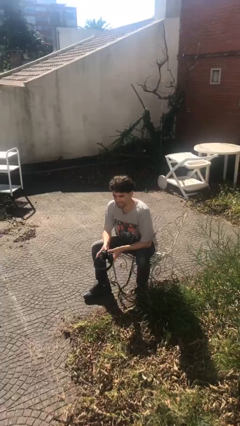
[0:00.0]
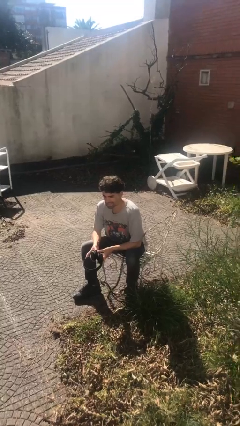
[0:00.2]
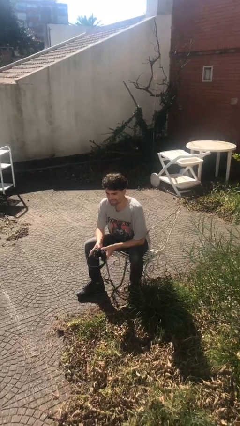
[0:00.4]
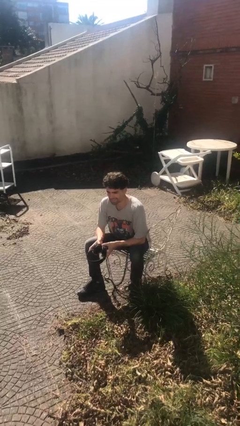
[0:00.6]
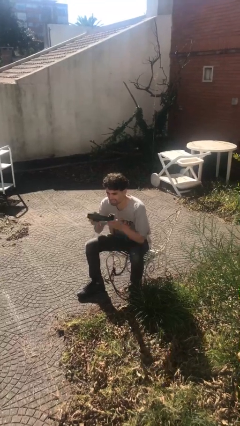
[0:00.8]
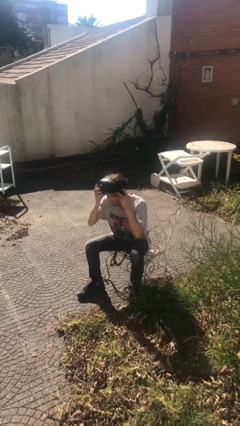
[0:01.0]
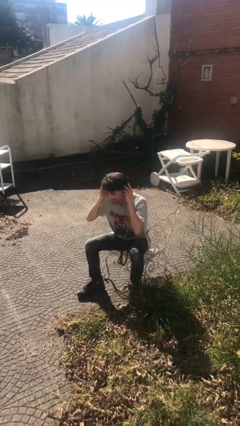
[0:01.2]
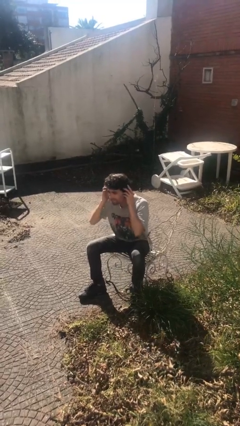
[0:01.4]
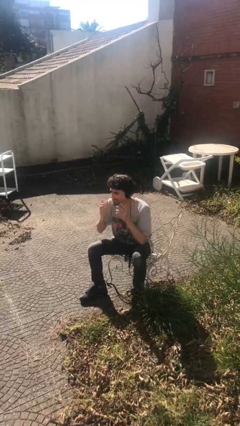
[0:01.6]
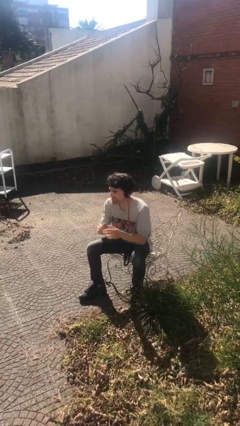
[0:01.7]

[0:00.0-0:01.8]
person puts on headphones

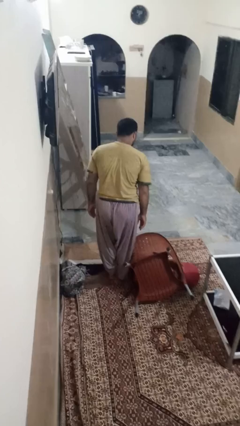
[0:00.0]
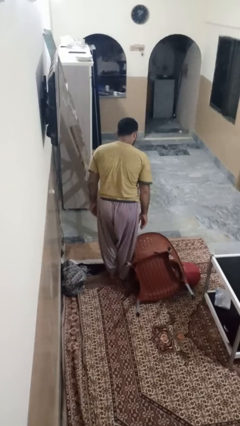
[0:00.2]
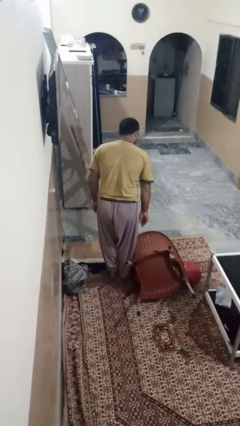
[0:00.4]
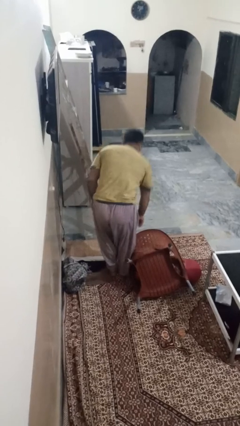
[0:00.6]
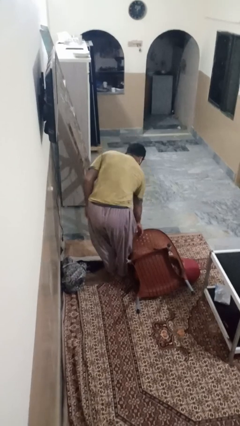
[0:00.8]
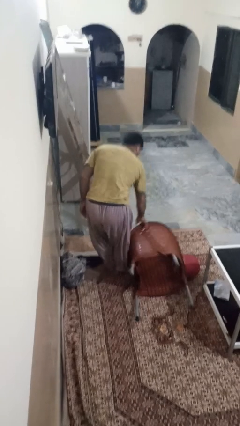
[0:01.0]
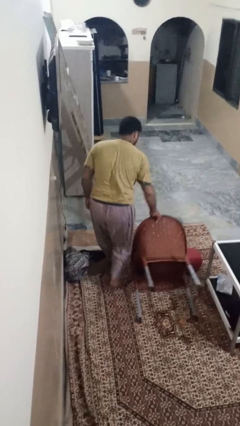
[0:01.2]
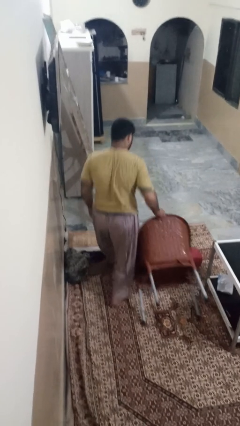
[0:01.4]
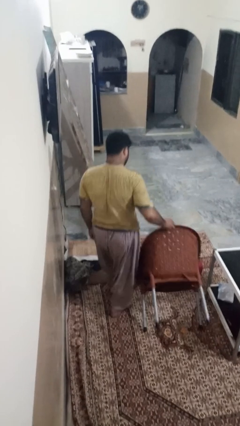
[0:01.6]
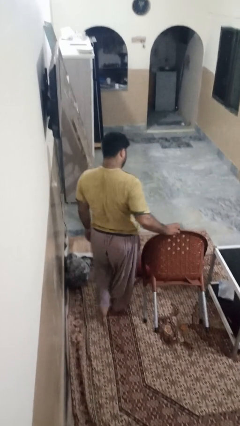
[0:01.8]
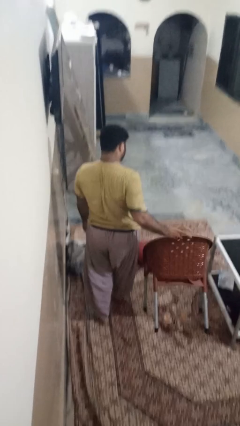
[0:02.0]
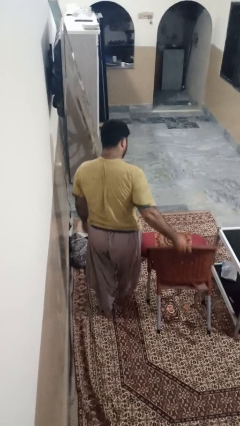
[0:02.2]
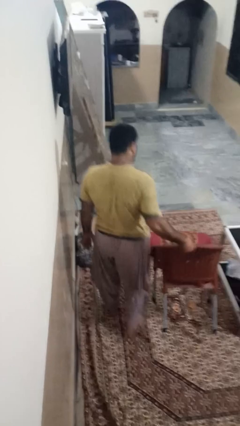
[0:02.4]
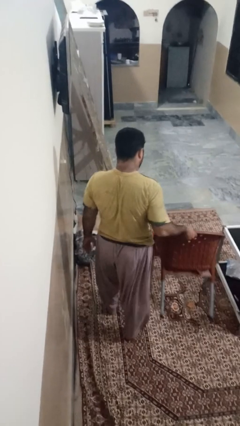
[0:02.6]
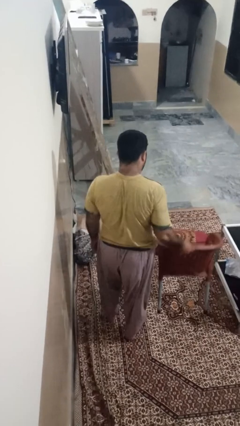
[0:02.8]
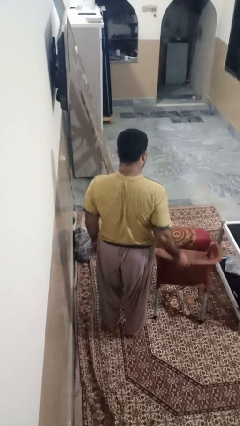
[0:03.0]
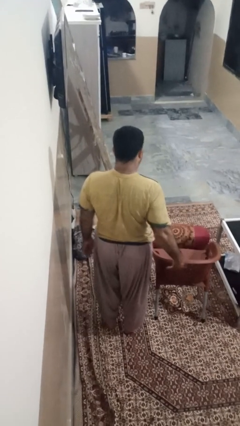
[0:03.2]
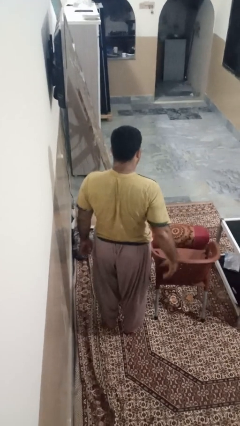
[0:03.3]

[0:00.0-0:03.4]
person sets upright furniture

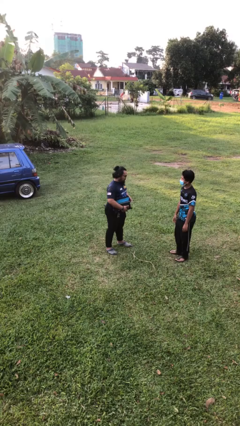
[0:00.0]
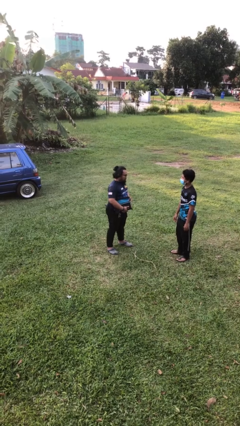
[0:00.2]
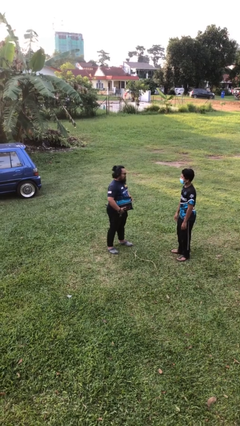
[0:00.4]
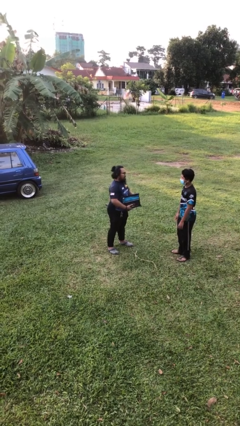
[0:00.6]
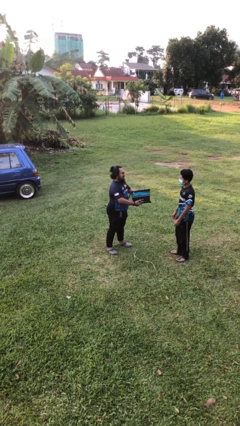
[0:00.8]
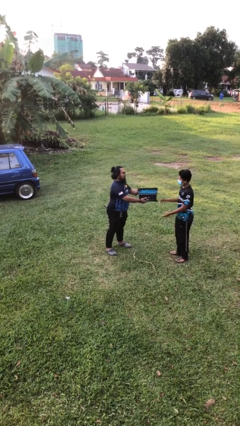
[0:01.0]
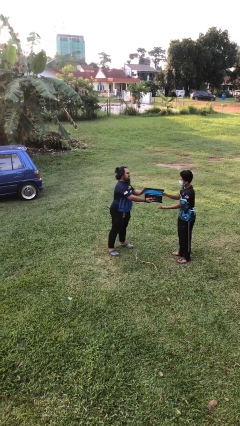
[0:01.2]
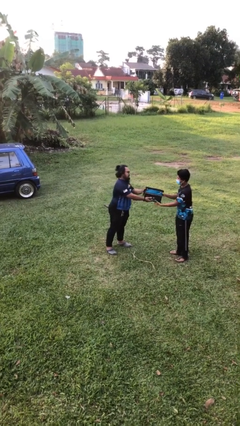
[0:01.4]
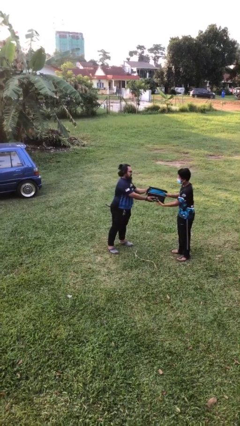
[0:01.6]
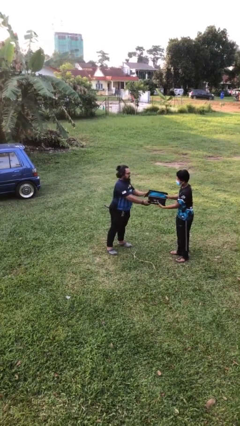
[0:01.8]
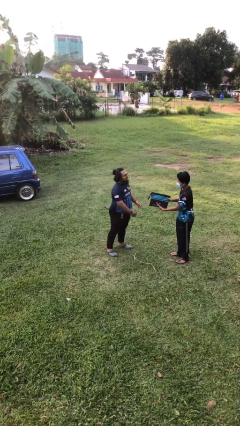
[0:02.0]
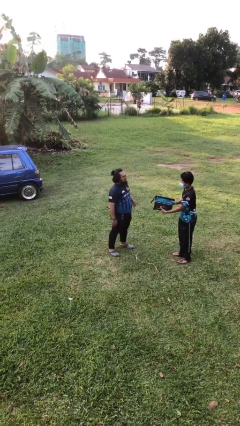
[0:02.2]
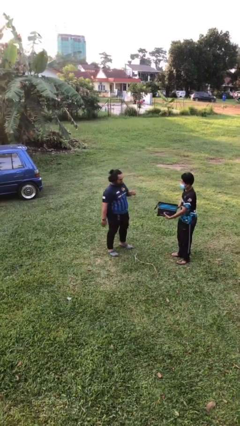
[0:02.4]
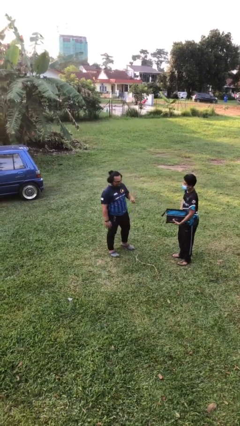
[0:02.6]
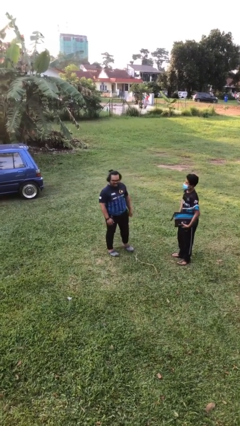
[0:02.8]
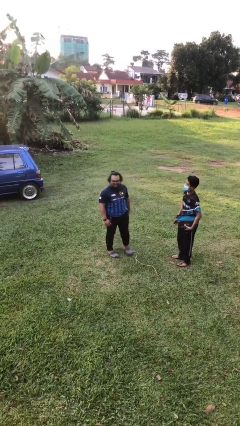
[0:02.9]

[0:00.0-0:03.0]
person transfers object to person

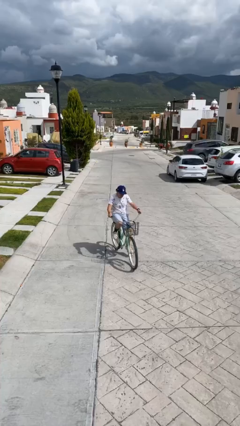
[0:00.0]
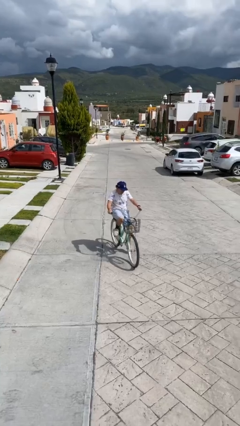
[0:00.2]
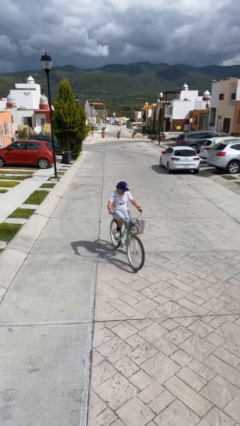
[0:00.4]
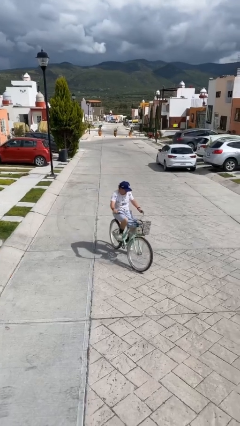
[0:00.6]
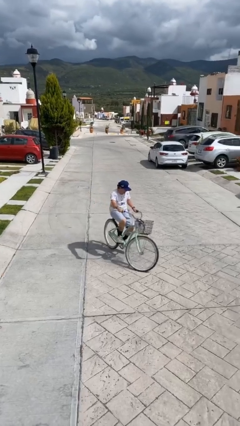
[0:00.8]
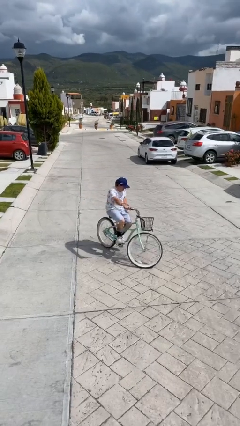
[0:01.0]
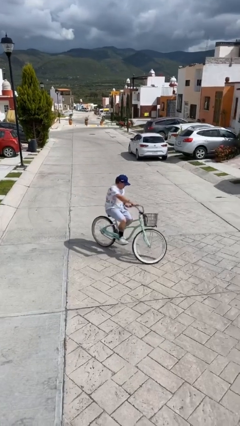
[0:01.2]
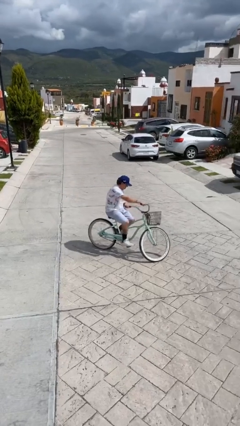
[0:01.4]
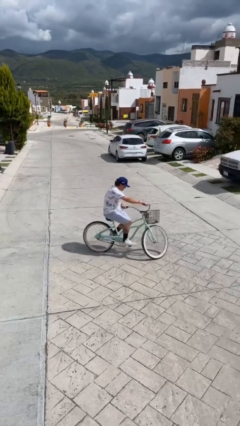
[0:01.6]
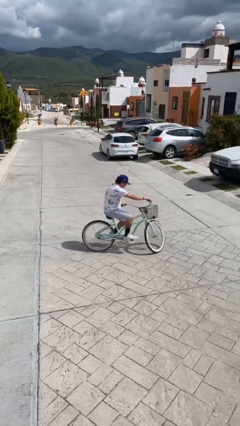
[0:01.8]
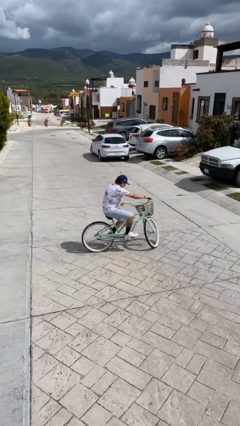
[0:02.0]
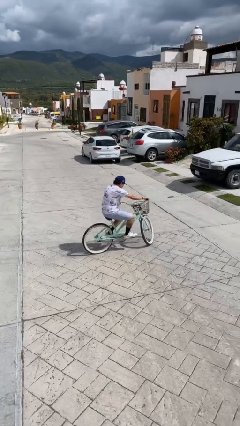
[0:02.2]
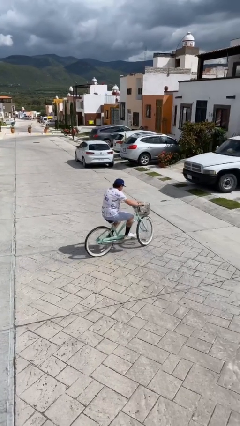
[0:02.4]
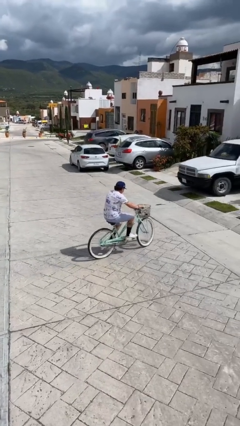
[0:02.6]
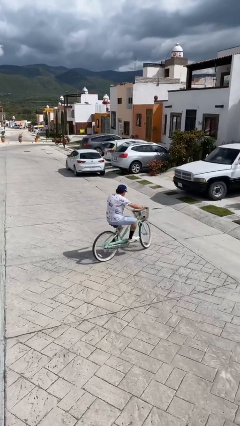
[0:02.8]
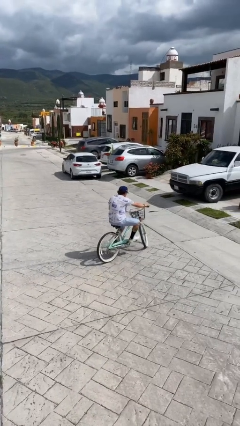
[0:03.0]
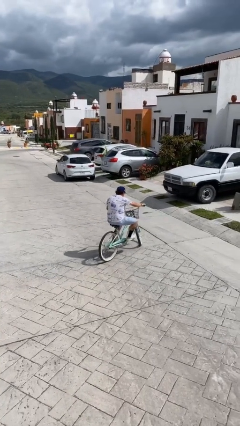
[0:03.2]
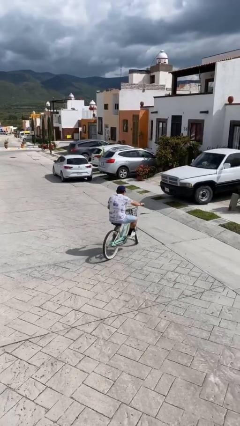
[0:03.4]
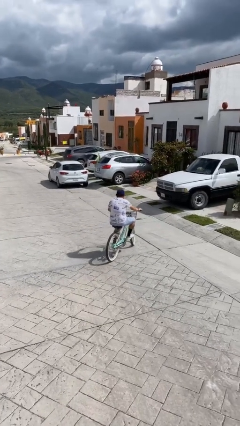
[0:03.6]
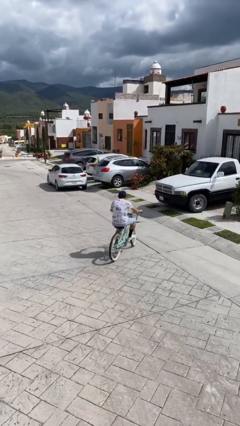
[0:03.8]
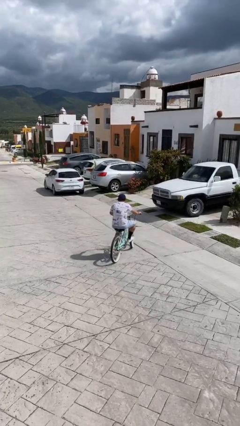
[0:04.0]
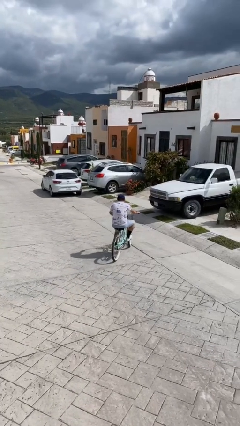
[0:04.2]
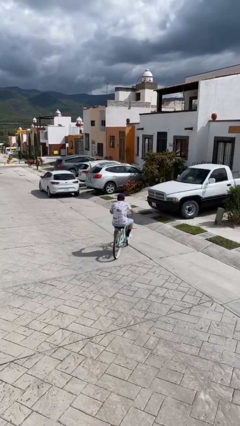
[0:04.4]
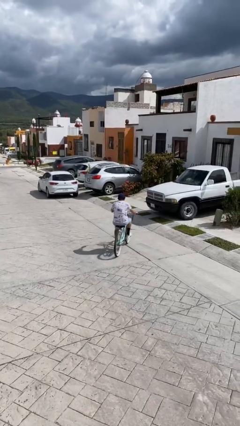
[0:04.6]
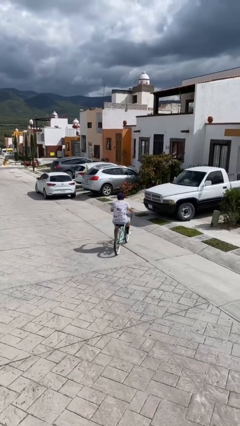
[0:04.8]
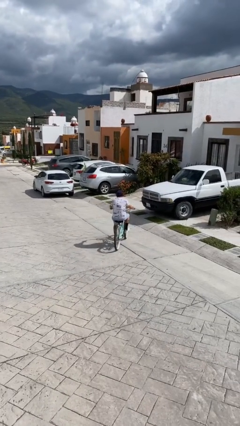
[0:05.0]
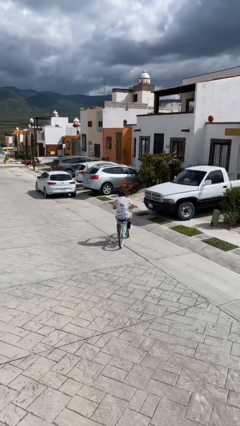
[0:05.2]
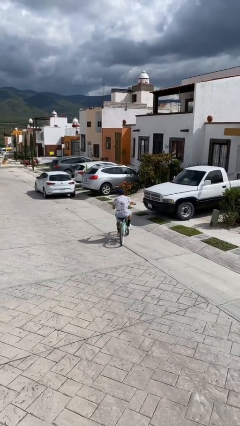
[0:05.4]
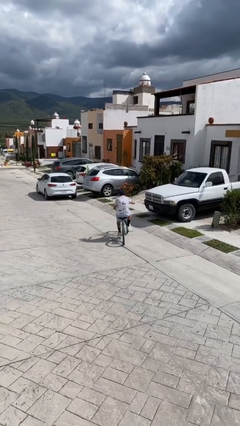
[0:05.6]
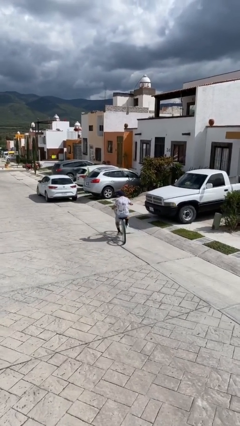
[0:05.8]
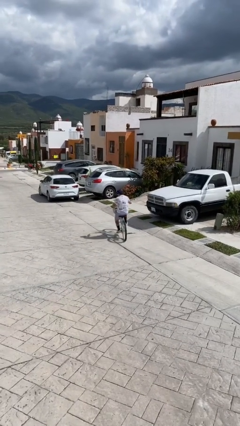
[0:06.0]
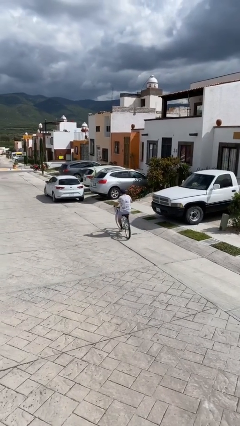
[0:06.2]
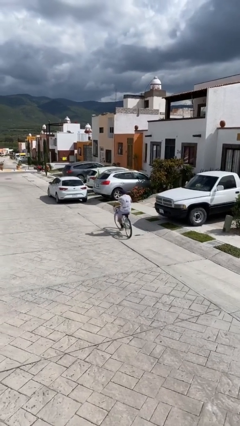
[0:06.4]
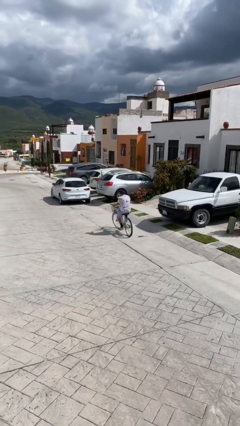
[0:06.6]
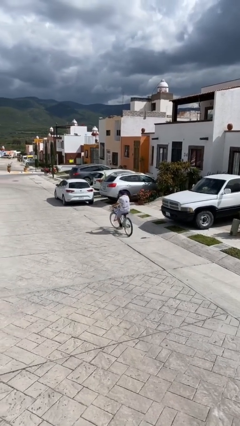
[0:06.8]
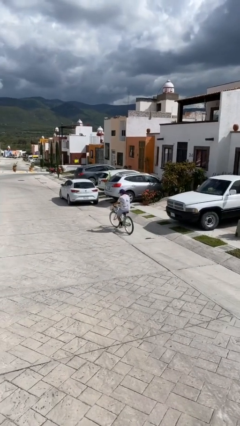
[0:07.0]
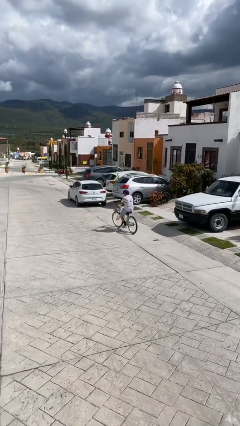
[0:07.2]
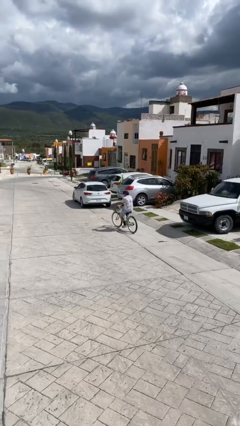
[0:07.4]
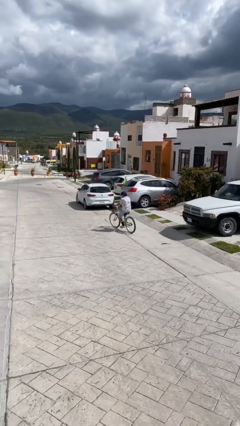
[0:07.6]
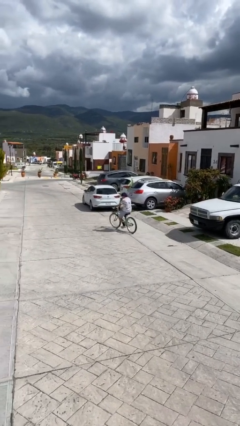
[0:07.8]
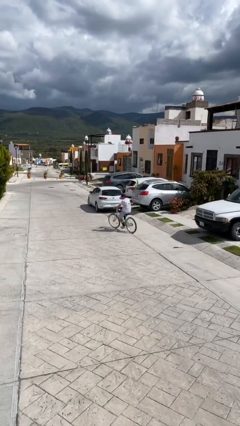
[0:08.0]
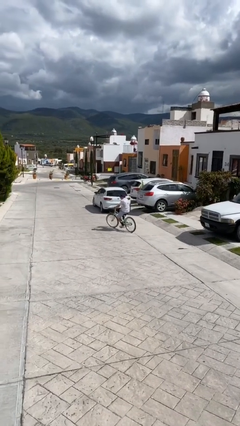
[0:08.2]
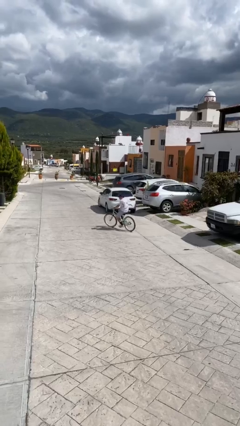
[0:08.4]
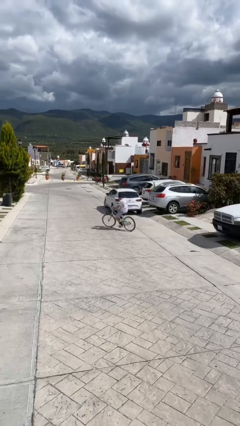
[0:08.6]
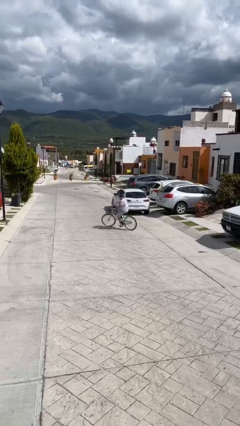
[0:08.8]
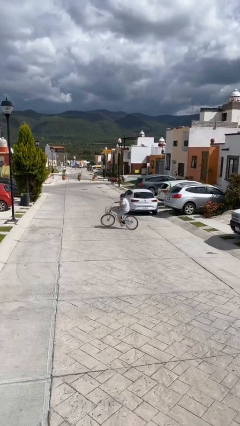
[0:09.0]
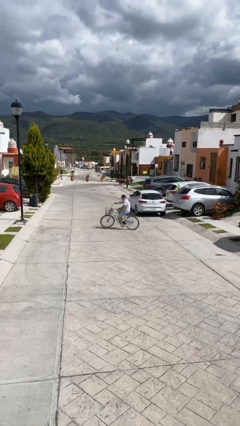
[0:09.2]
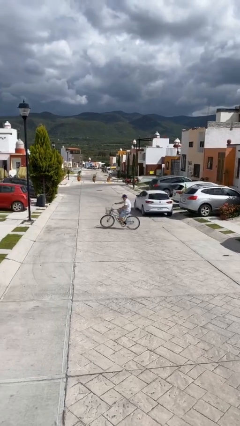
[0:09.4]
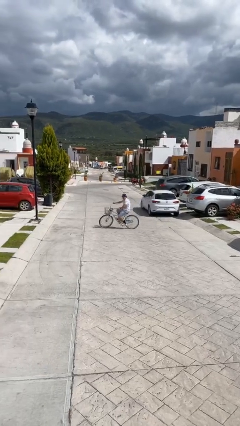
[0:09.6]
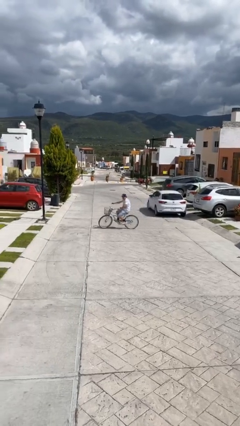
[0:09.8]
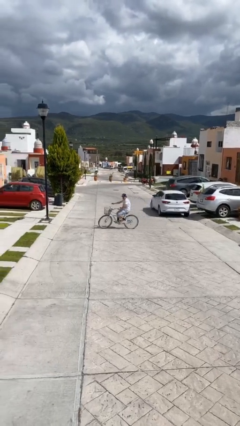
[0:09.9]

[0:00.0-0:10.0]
person rides bicycle
